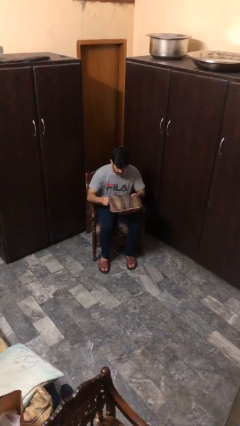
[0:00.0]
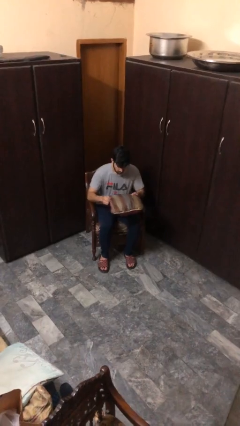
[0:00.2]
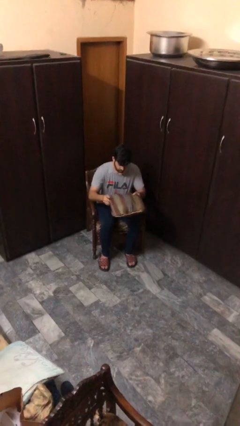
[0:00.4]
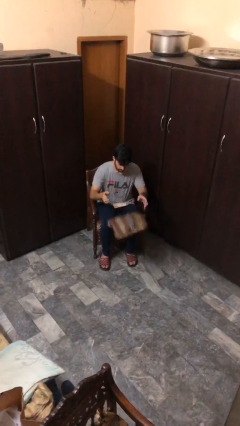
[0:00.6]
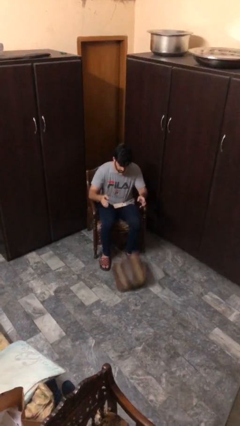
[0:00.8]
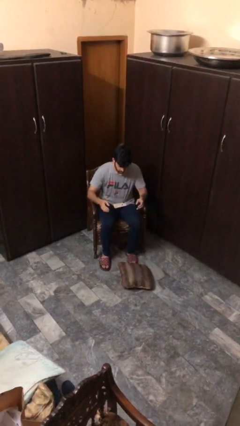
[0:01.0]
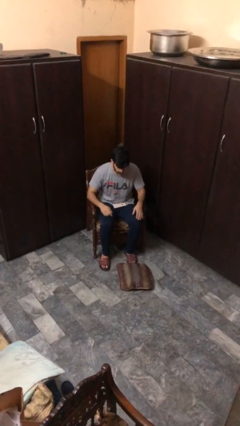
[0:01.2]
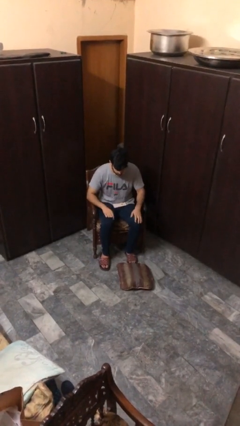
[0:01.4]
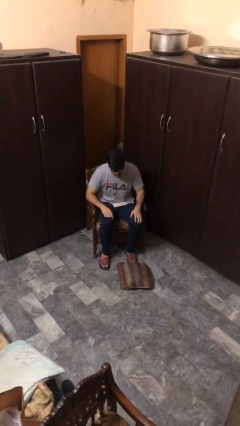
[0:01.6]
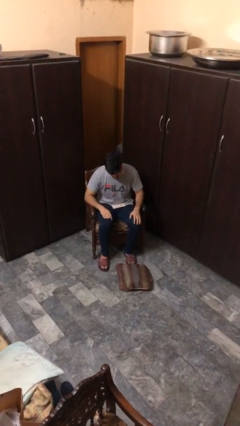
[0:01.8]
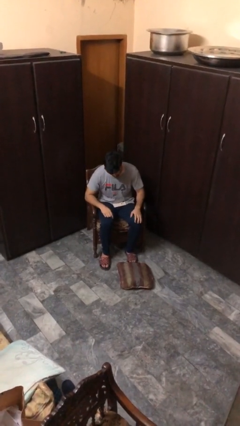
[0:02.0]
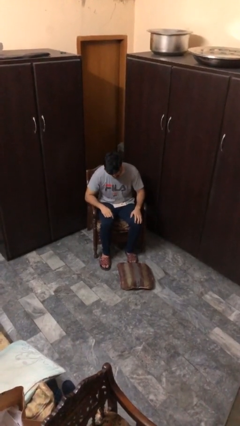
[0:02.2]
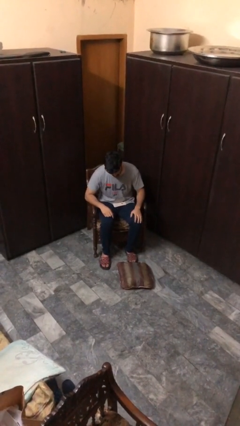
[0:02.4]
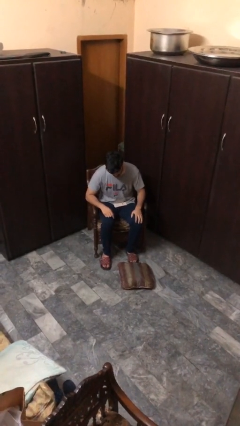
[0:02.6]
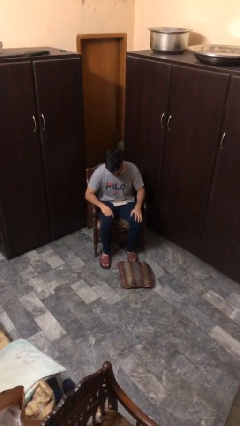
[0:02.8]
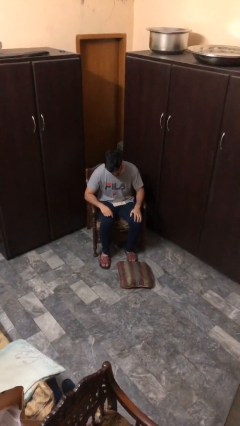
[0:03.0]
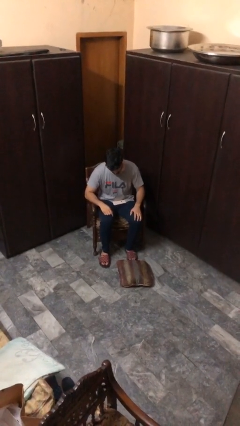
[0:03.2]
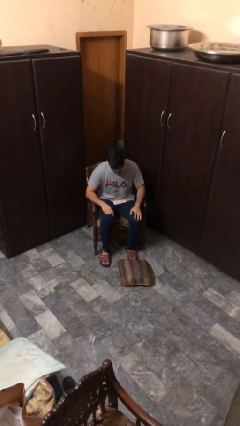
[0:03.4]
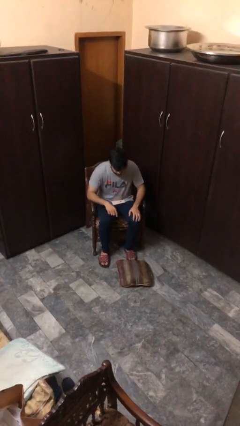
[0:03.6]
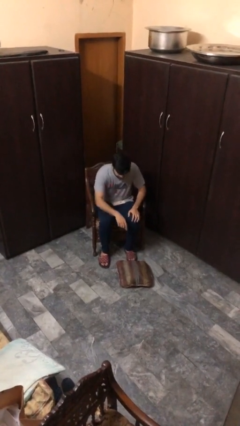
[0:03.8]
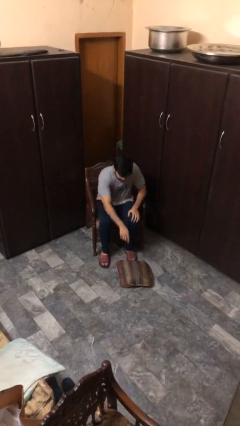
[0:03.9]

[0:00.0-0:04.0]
person drops object

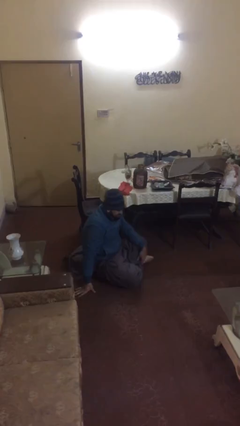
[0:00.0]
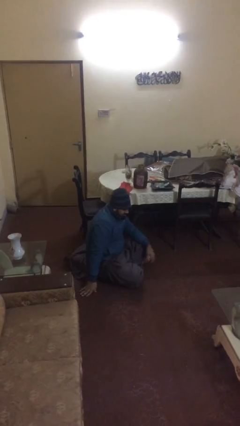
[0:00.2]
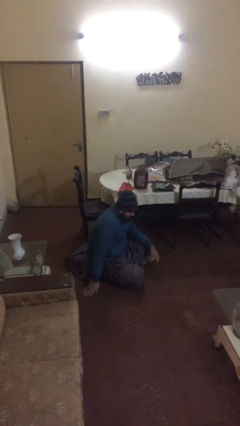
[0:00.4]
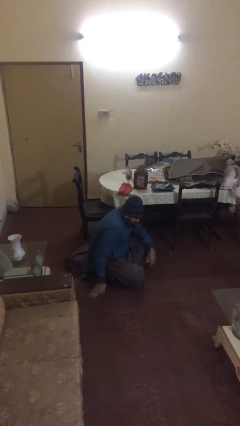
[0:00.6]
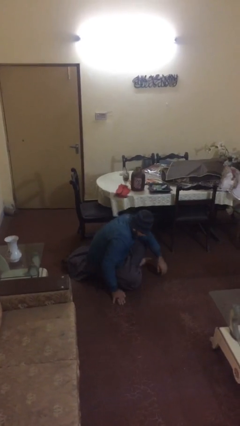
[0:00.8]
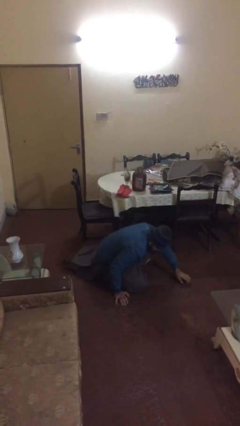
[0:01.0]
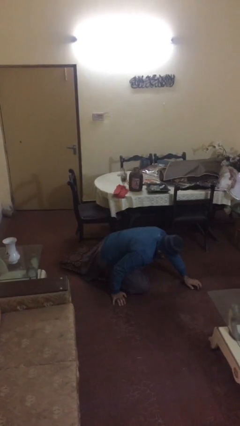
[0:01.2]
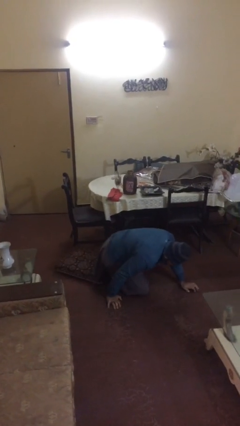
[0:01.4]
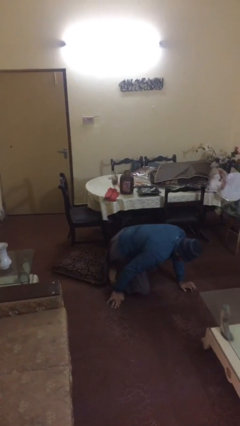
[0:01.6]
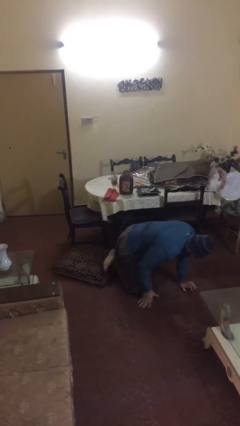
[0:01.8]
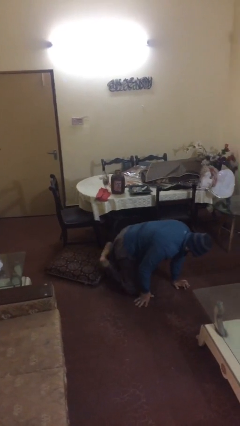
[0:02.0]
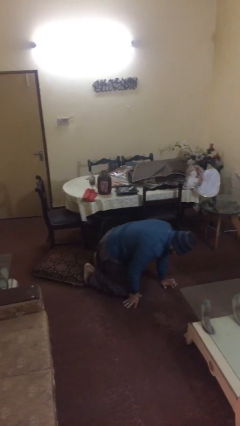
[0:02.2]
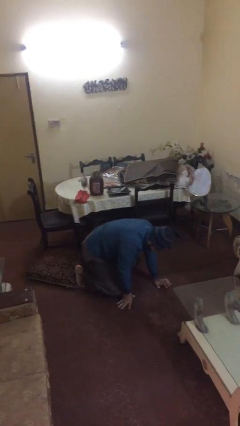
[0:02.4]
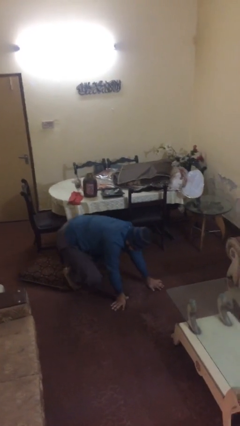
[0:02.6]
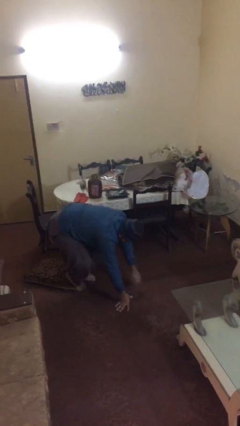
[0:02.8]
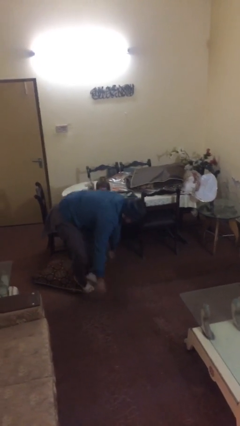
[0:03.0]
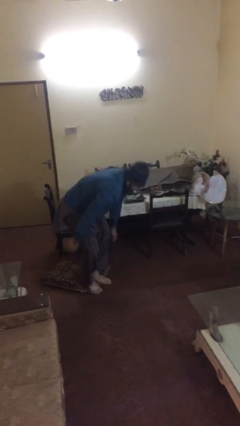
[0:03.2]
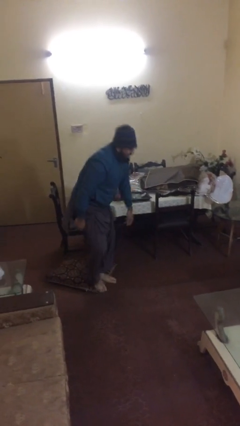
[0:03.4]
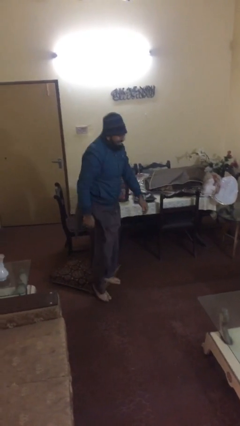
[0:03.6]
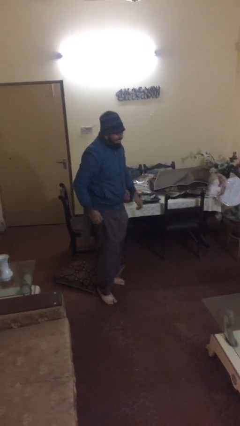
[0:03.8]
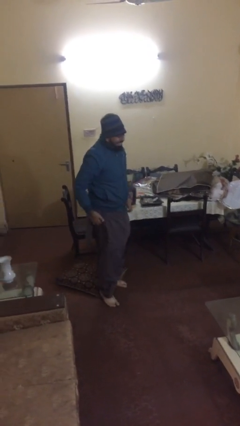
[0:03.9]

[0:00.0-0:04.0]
person stands up

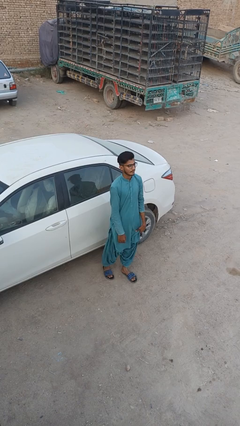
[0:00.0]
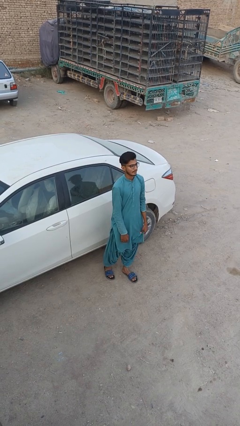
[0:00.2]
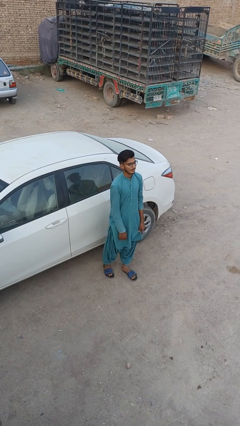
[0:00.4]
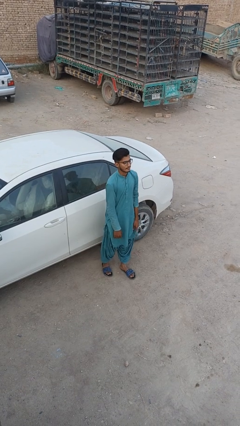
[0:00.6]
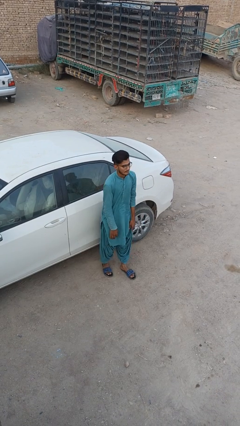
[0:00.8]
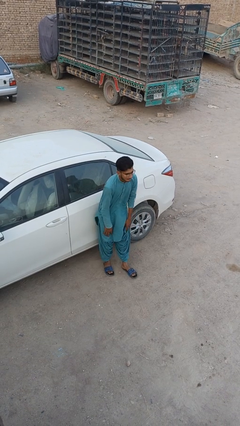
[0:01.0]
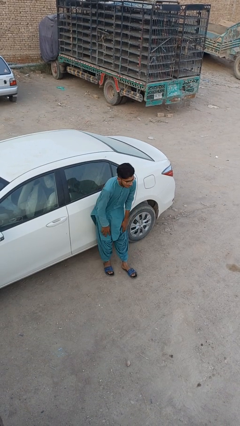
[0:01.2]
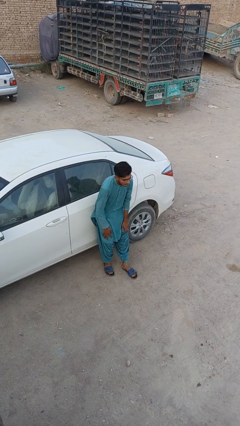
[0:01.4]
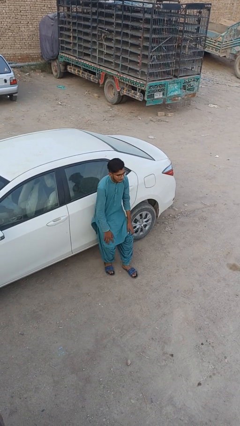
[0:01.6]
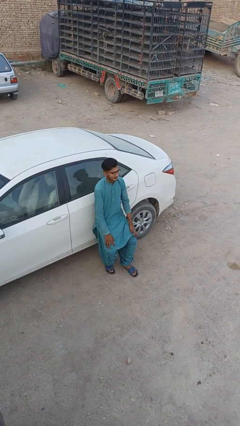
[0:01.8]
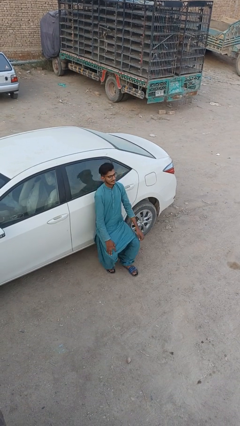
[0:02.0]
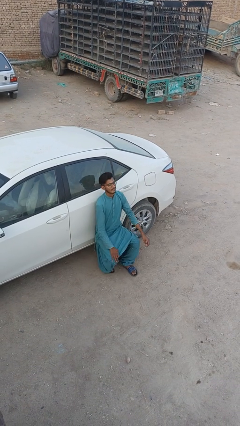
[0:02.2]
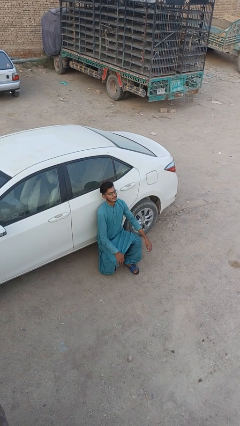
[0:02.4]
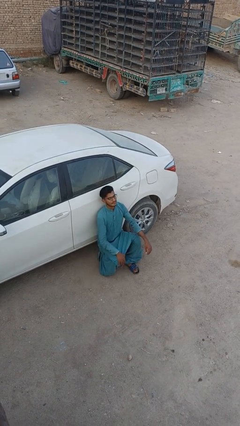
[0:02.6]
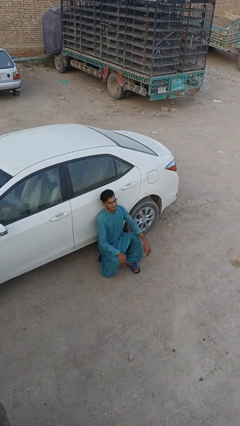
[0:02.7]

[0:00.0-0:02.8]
person leans against car

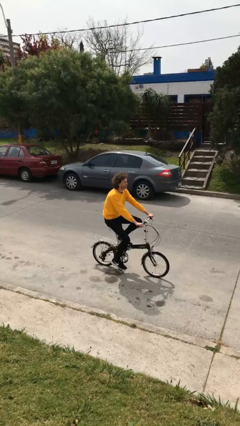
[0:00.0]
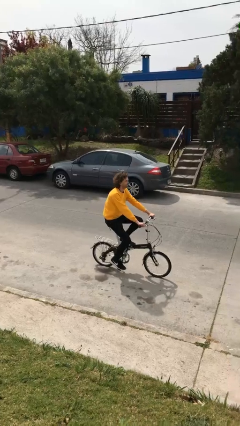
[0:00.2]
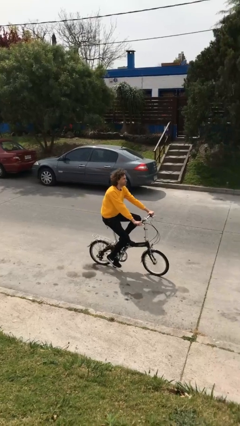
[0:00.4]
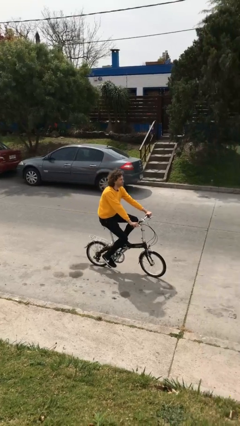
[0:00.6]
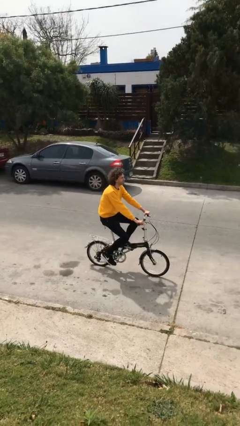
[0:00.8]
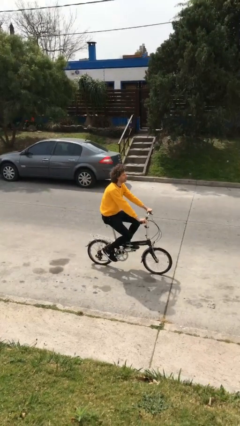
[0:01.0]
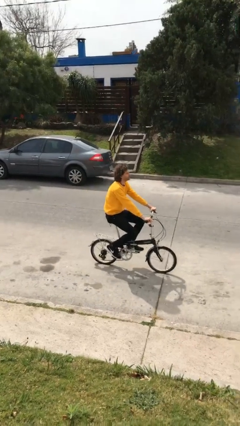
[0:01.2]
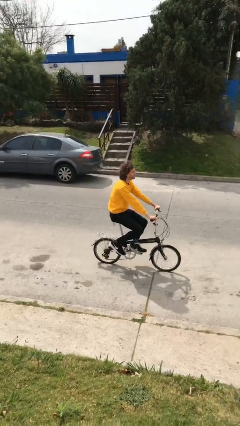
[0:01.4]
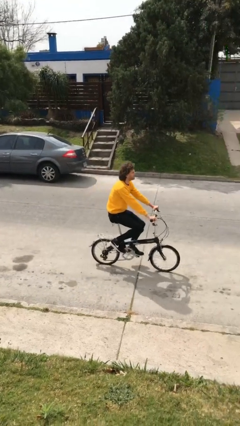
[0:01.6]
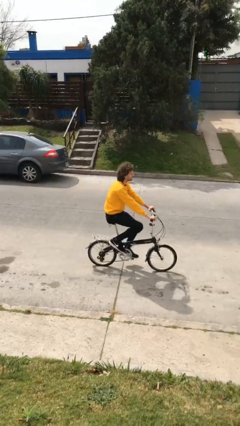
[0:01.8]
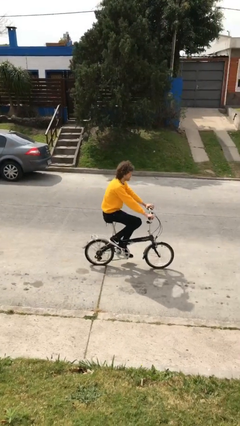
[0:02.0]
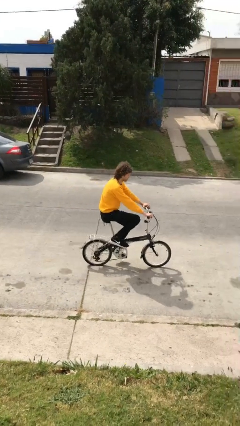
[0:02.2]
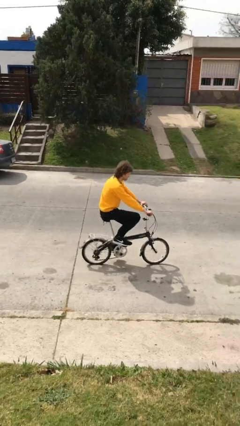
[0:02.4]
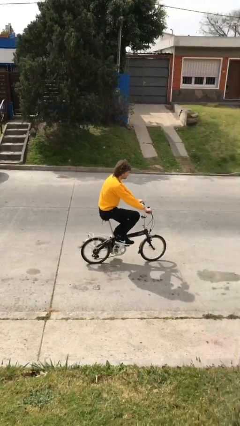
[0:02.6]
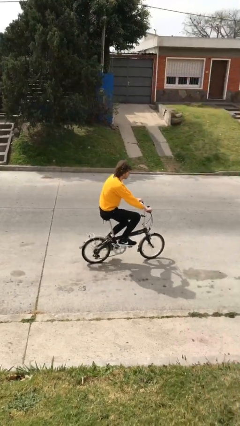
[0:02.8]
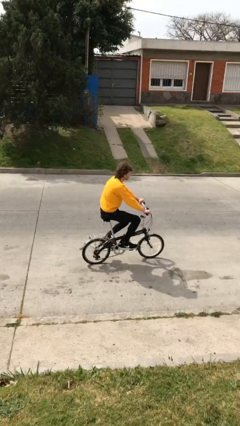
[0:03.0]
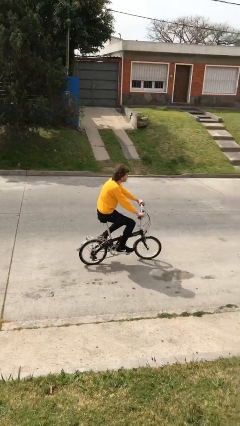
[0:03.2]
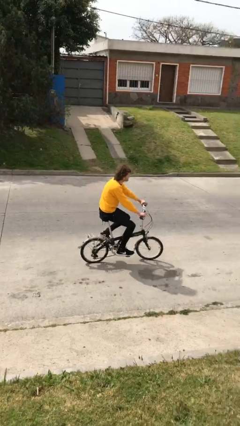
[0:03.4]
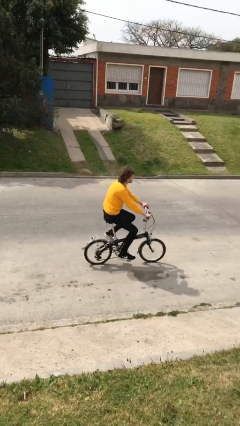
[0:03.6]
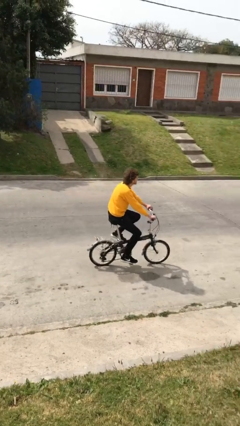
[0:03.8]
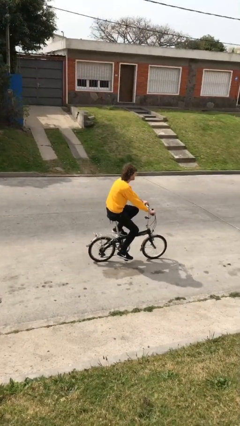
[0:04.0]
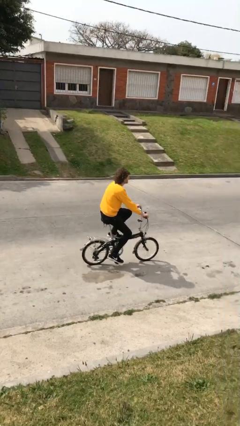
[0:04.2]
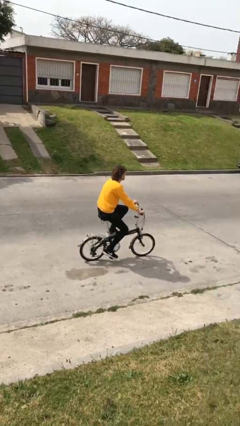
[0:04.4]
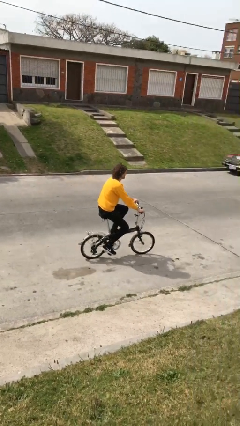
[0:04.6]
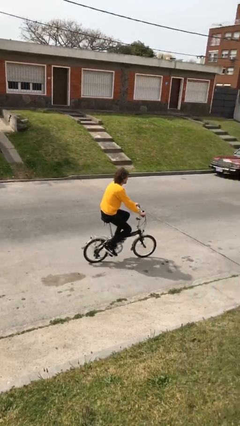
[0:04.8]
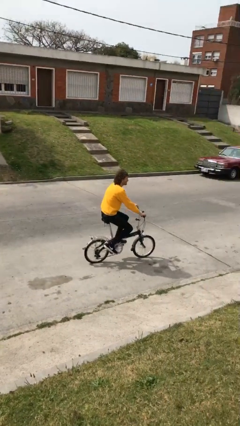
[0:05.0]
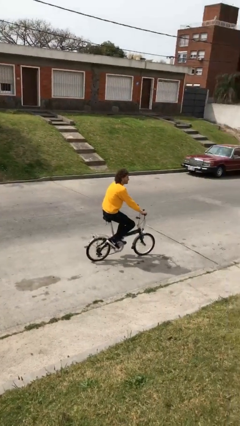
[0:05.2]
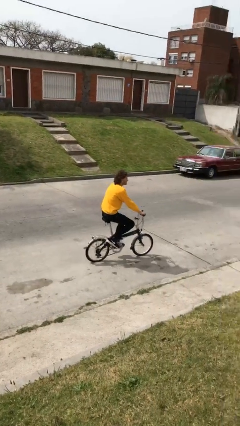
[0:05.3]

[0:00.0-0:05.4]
person rides bicycle

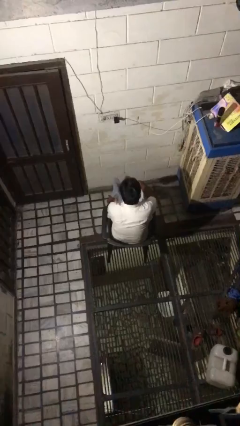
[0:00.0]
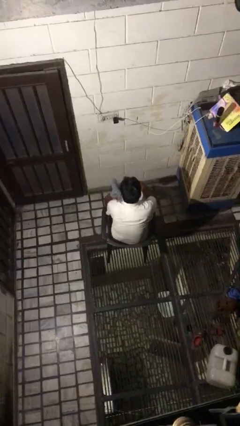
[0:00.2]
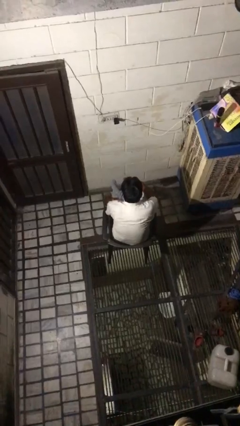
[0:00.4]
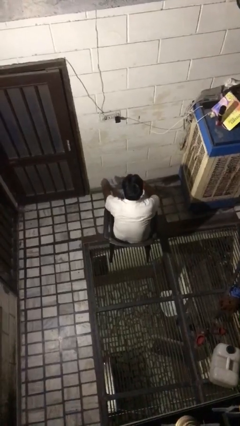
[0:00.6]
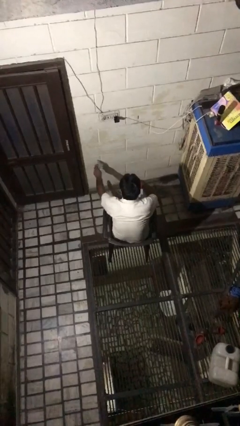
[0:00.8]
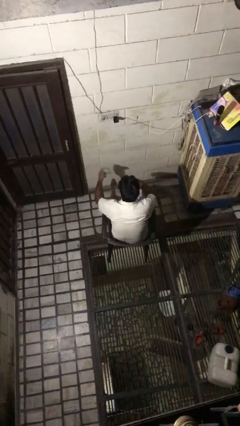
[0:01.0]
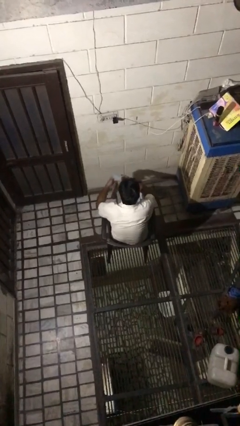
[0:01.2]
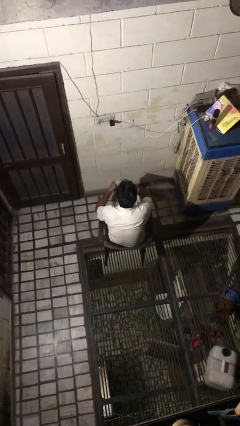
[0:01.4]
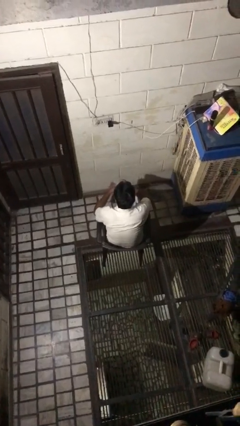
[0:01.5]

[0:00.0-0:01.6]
person takes off socks
